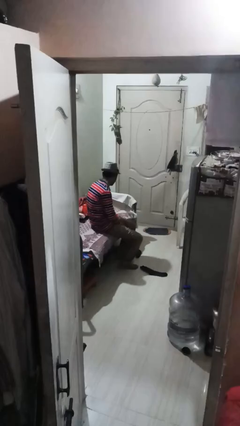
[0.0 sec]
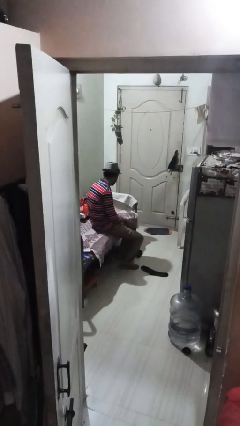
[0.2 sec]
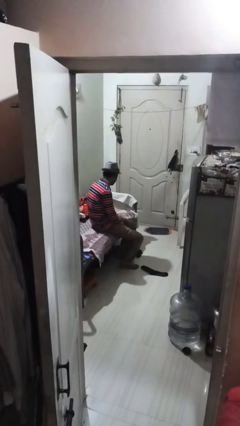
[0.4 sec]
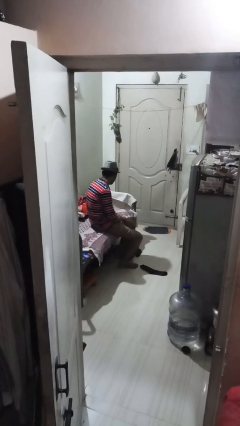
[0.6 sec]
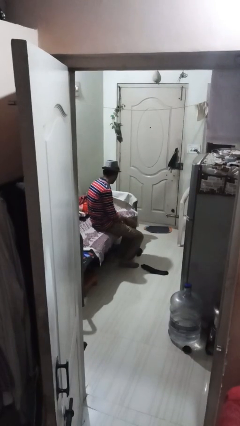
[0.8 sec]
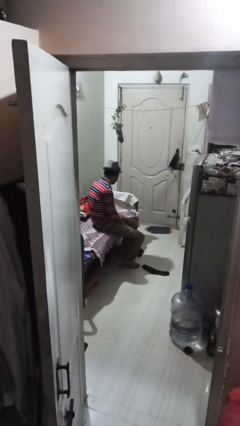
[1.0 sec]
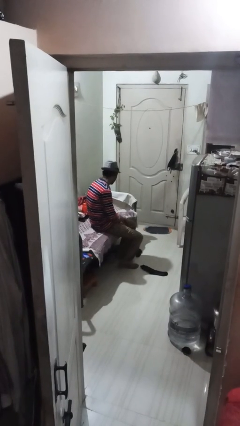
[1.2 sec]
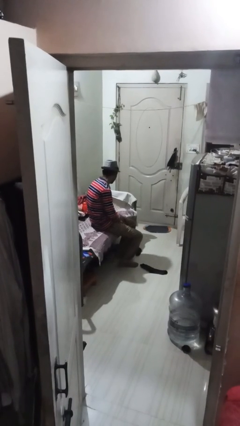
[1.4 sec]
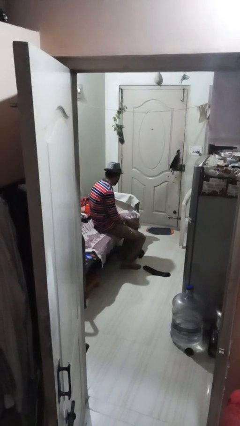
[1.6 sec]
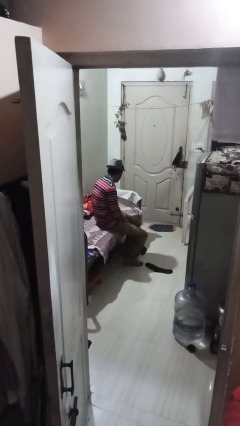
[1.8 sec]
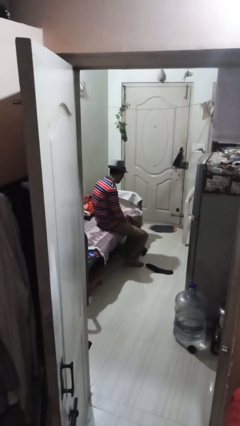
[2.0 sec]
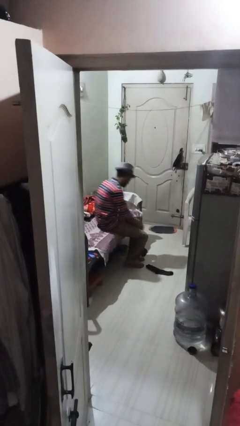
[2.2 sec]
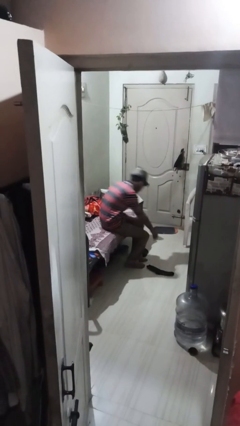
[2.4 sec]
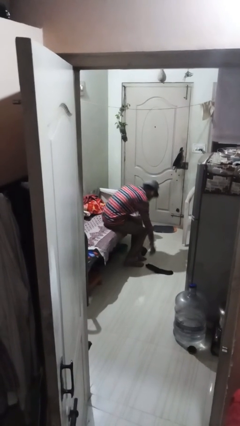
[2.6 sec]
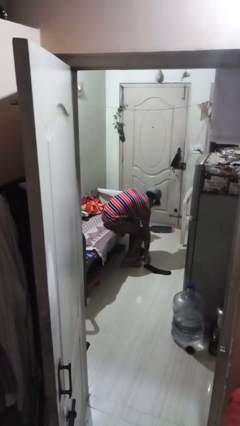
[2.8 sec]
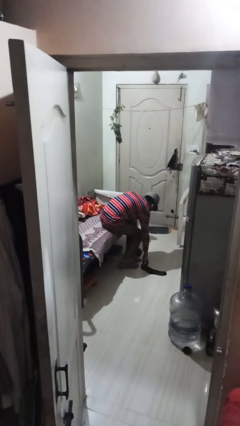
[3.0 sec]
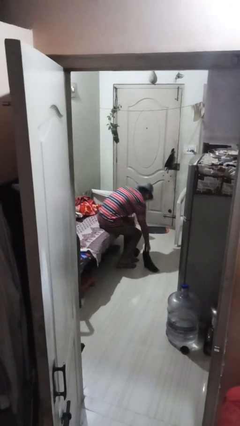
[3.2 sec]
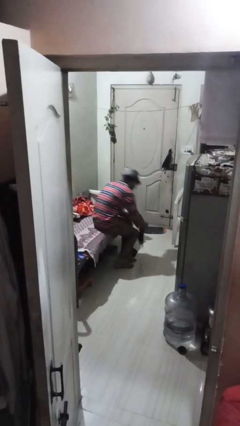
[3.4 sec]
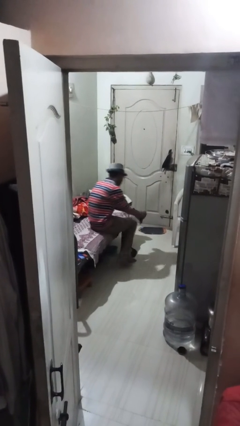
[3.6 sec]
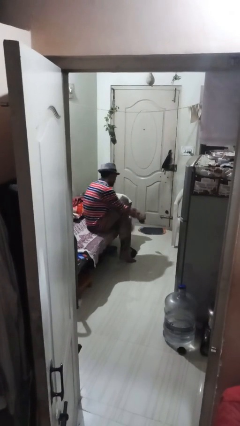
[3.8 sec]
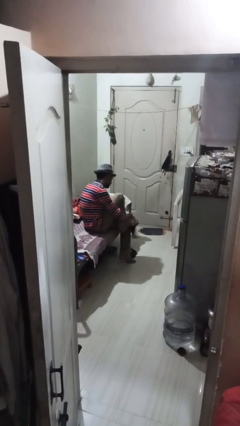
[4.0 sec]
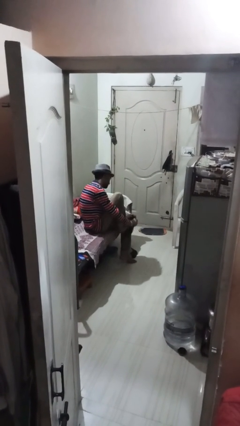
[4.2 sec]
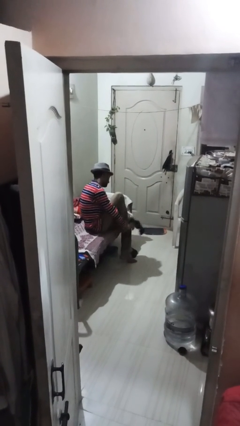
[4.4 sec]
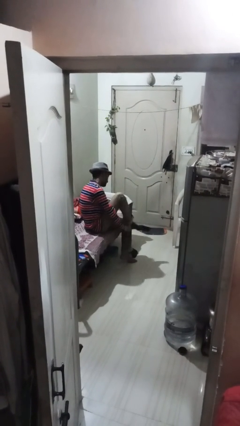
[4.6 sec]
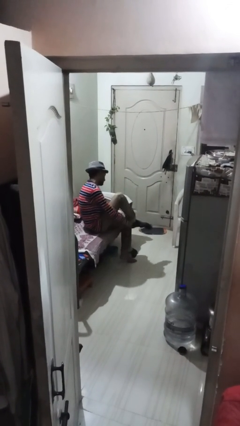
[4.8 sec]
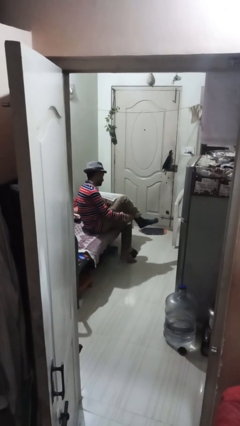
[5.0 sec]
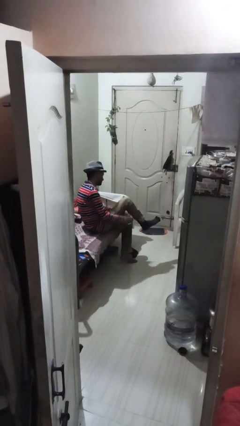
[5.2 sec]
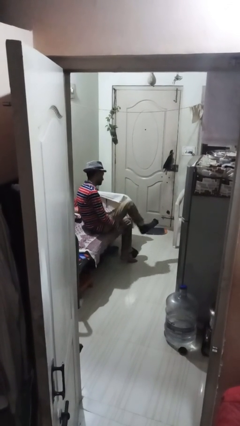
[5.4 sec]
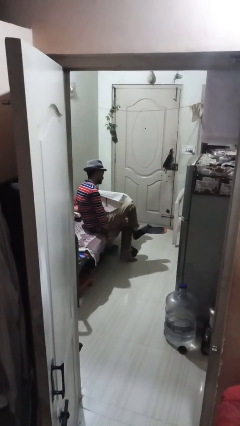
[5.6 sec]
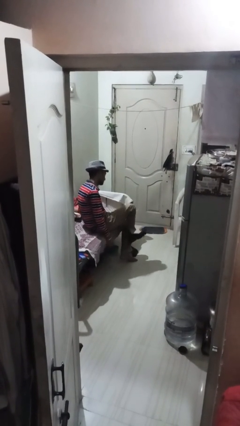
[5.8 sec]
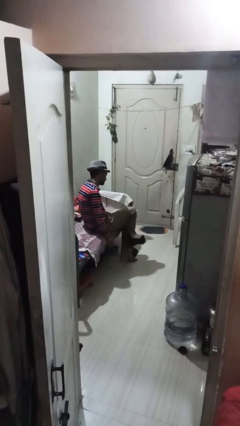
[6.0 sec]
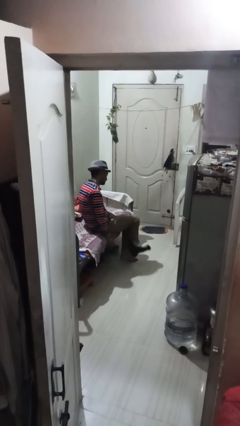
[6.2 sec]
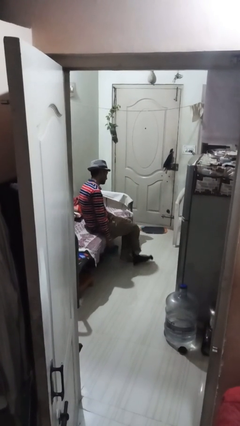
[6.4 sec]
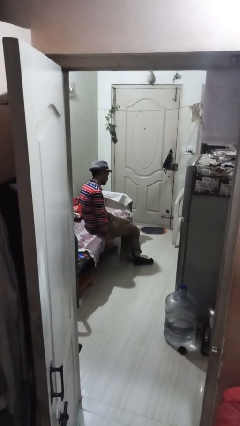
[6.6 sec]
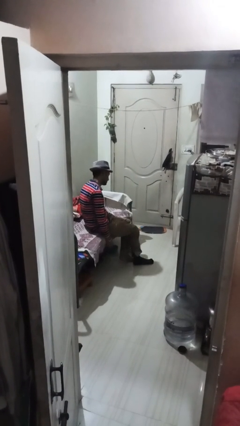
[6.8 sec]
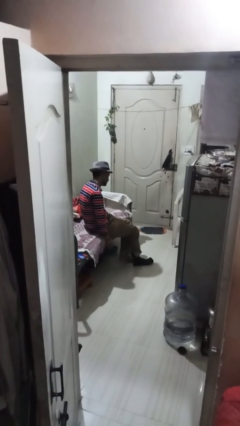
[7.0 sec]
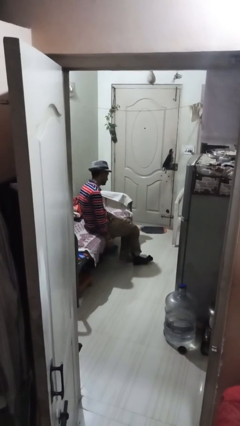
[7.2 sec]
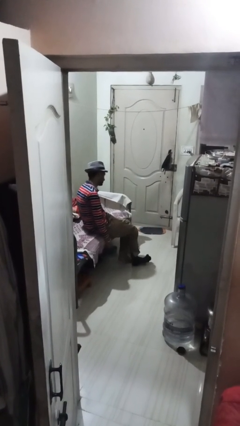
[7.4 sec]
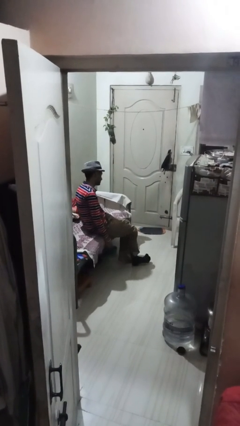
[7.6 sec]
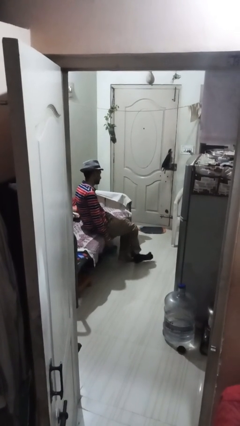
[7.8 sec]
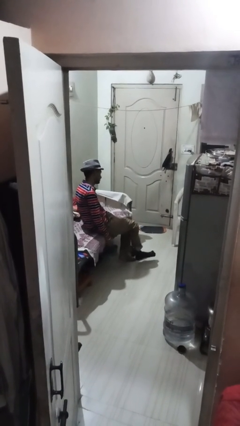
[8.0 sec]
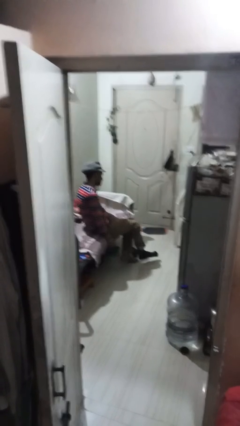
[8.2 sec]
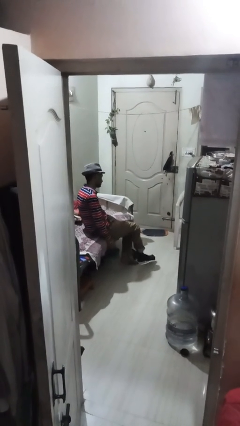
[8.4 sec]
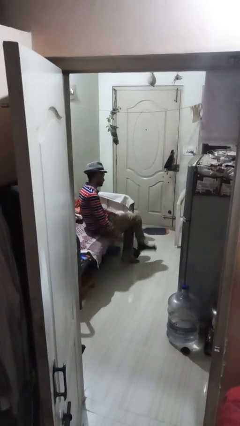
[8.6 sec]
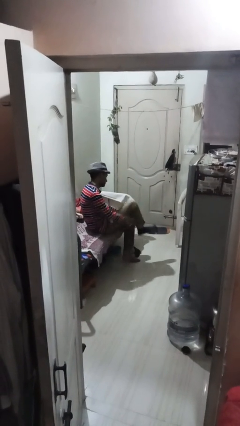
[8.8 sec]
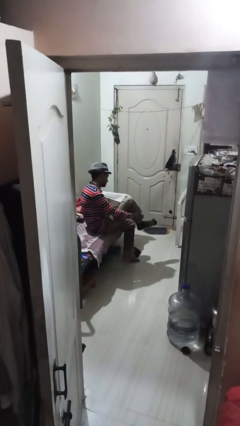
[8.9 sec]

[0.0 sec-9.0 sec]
person puts on socks

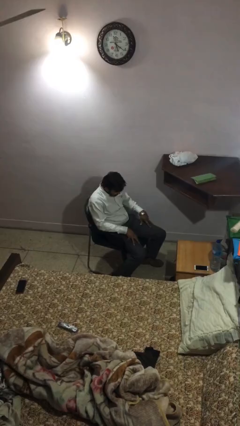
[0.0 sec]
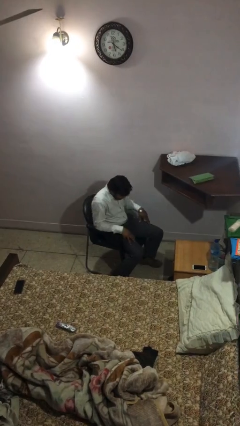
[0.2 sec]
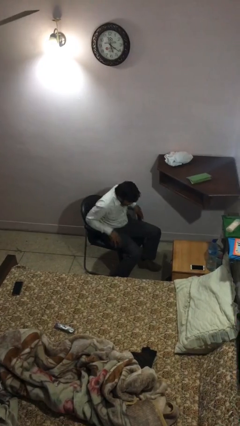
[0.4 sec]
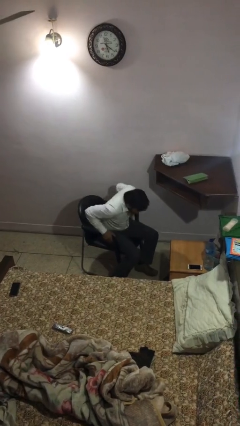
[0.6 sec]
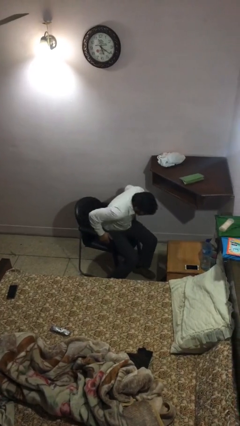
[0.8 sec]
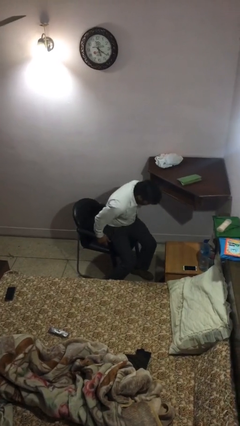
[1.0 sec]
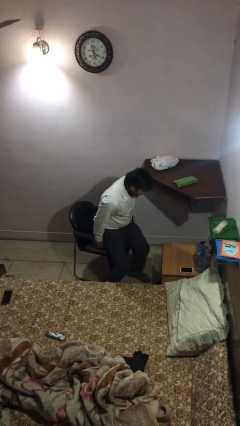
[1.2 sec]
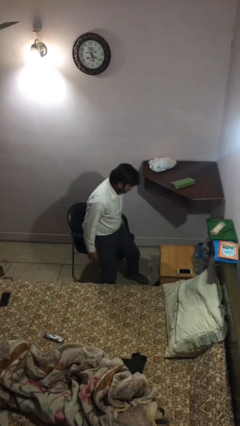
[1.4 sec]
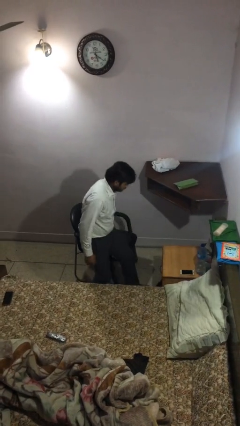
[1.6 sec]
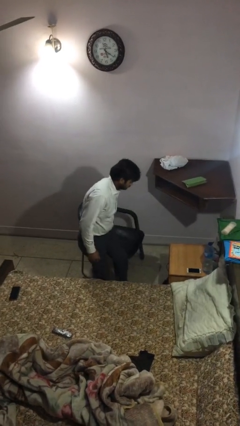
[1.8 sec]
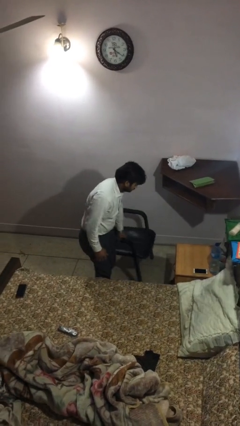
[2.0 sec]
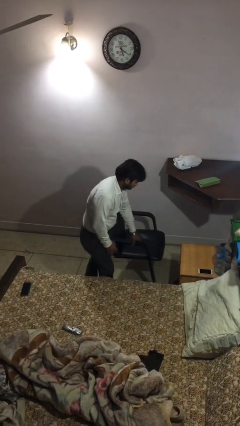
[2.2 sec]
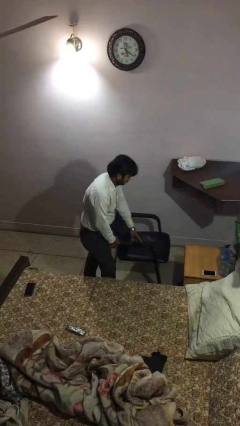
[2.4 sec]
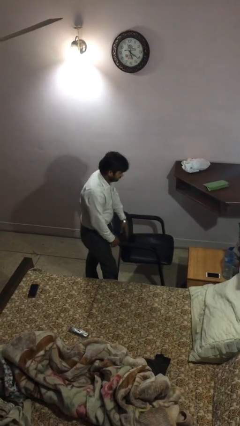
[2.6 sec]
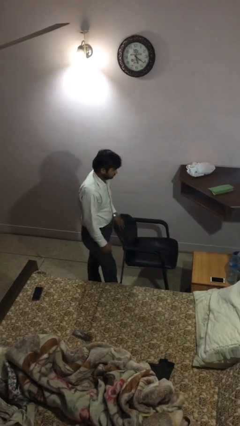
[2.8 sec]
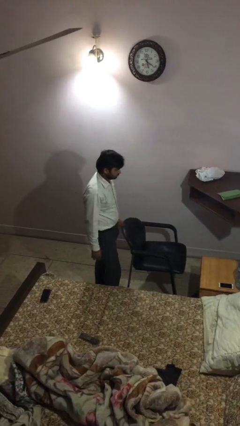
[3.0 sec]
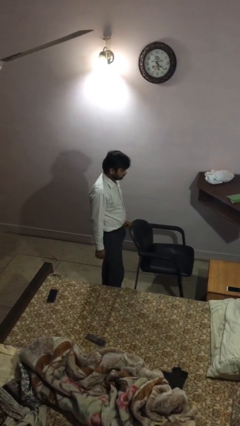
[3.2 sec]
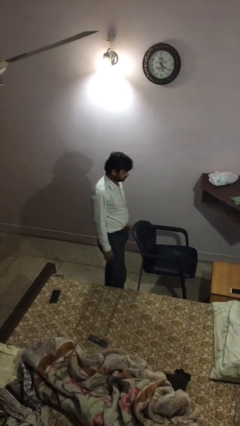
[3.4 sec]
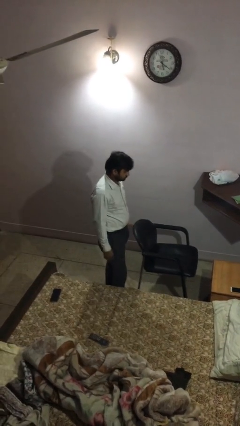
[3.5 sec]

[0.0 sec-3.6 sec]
person stands up

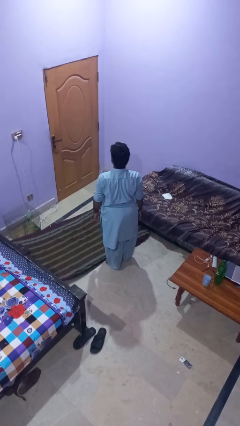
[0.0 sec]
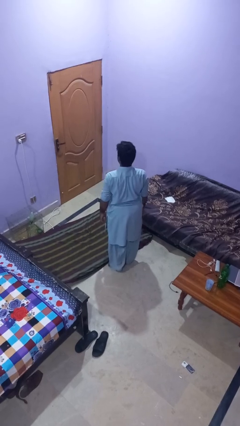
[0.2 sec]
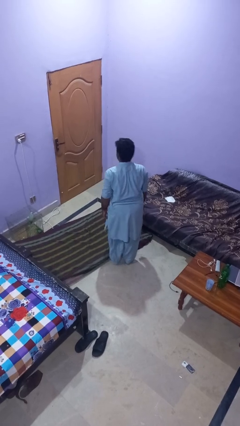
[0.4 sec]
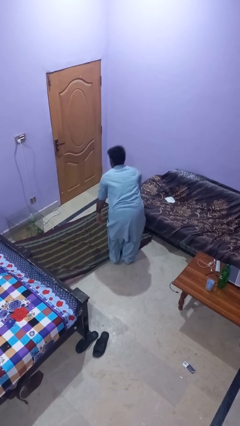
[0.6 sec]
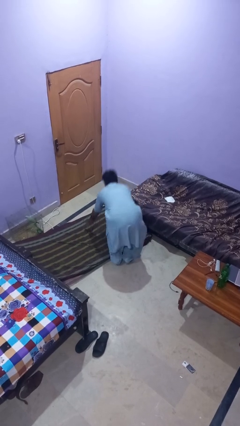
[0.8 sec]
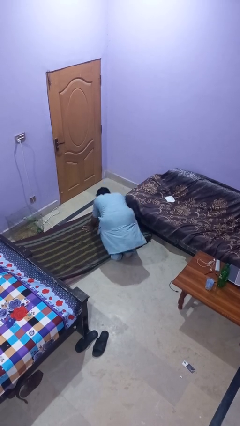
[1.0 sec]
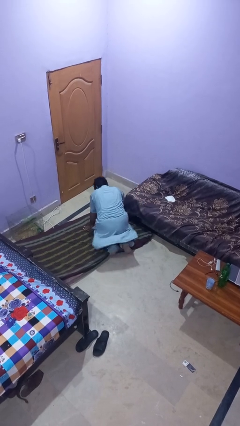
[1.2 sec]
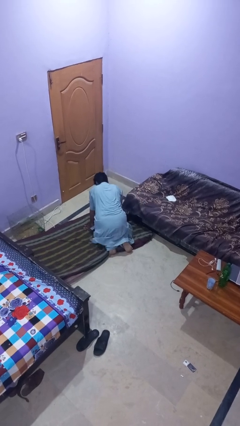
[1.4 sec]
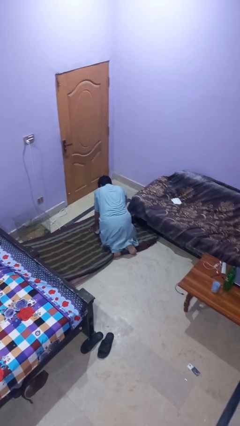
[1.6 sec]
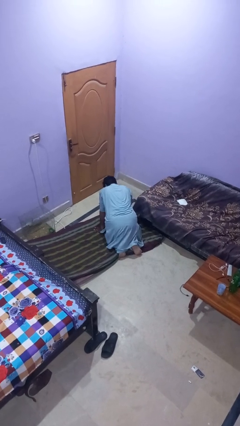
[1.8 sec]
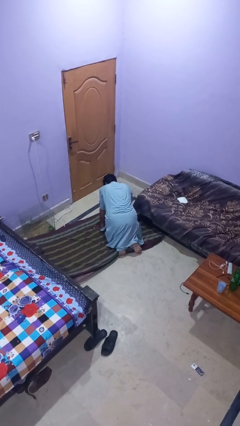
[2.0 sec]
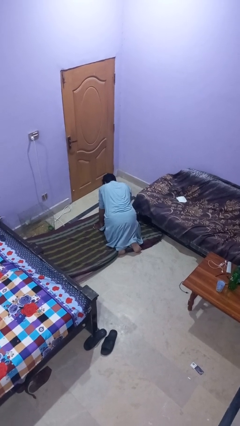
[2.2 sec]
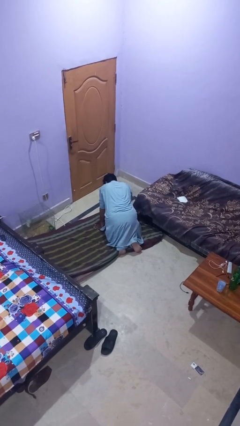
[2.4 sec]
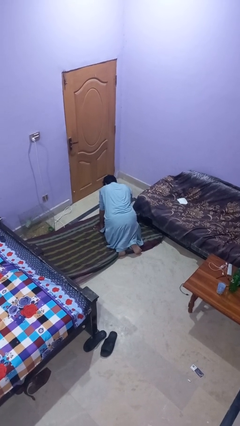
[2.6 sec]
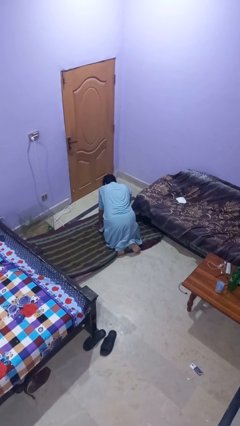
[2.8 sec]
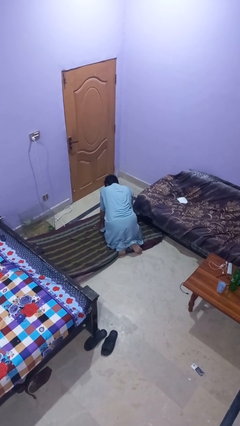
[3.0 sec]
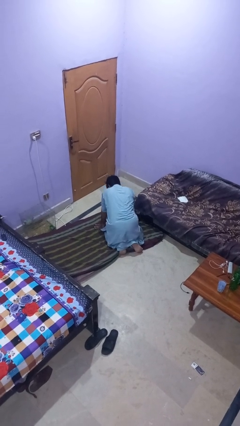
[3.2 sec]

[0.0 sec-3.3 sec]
person trips on object on floor

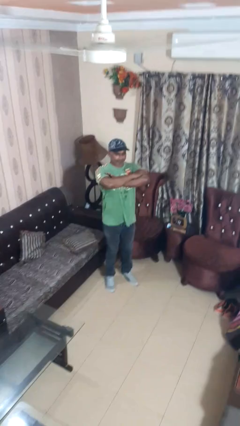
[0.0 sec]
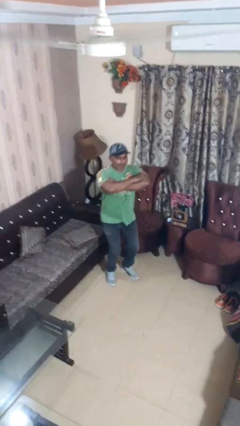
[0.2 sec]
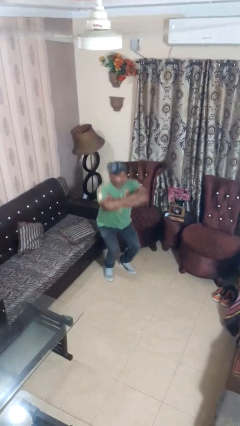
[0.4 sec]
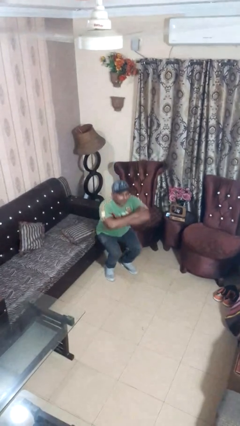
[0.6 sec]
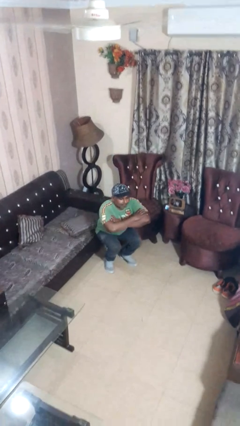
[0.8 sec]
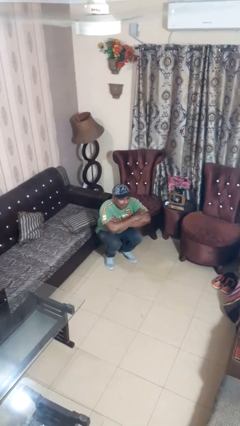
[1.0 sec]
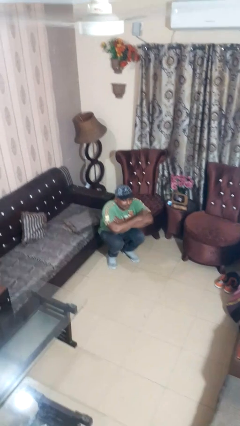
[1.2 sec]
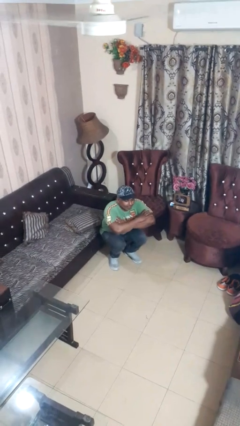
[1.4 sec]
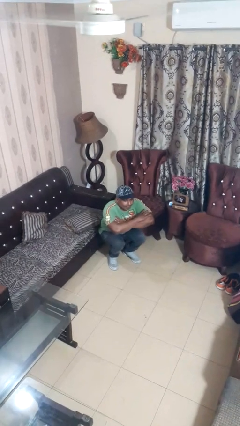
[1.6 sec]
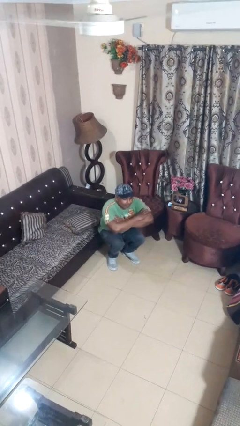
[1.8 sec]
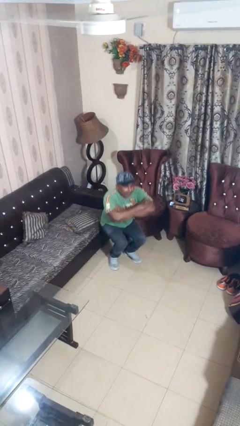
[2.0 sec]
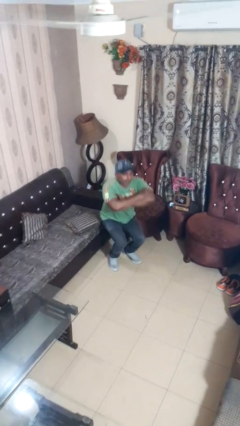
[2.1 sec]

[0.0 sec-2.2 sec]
person squats
